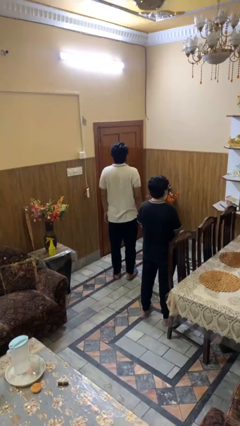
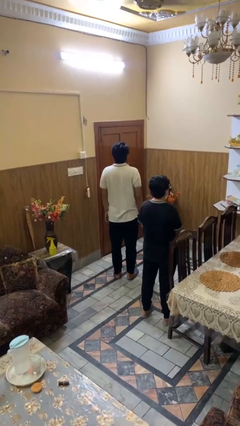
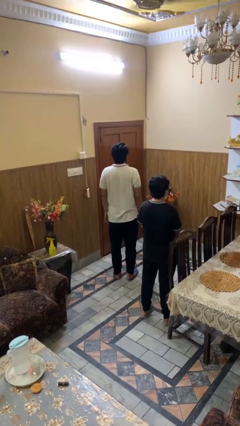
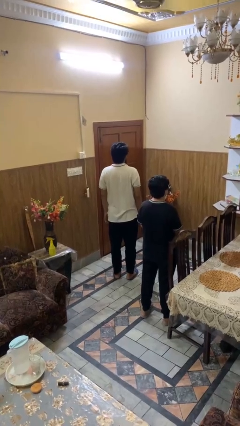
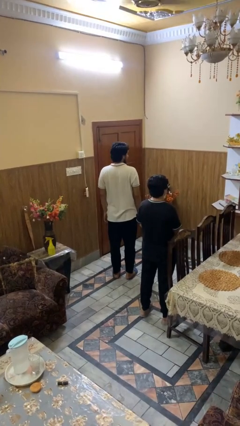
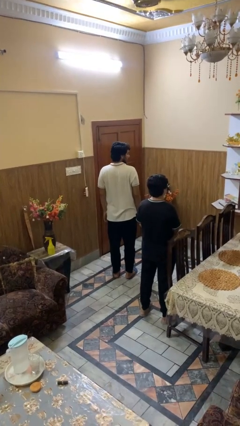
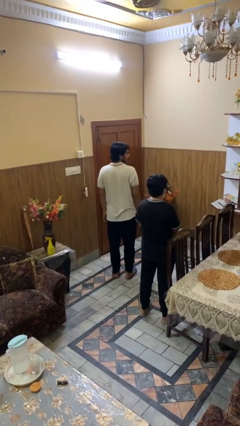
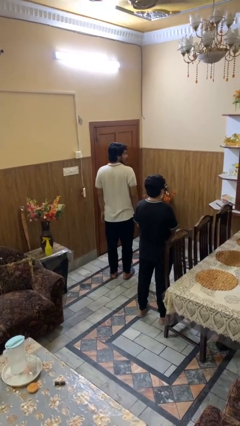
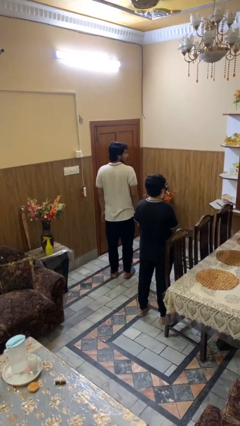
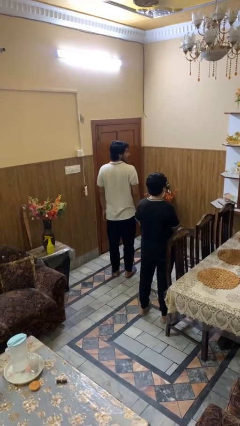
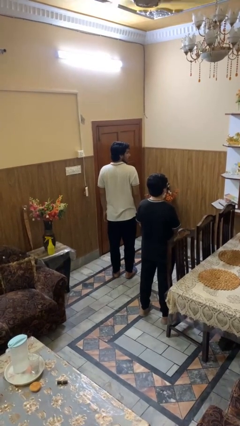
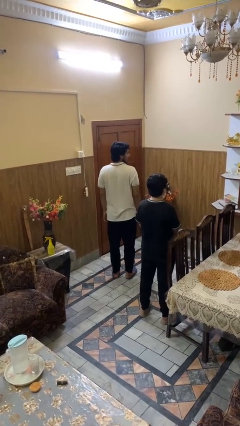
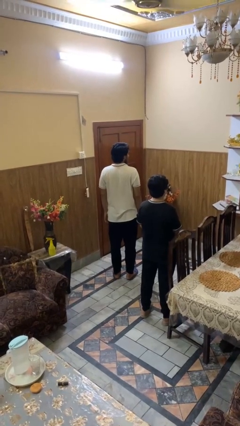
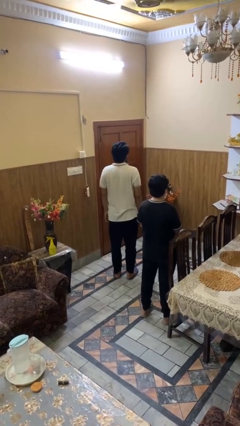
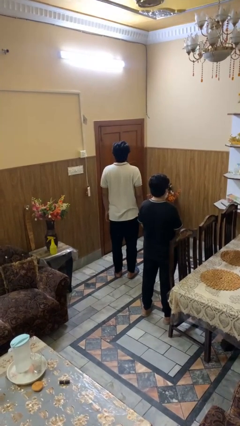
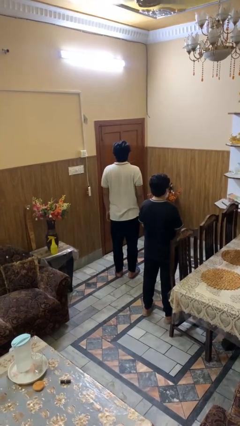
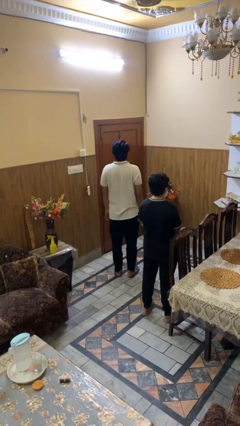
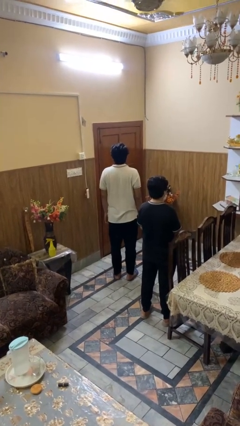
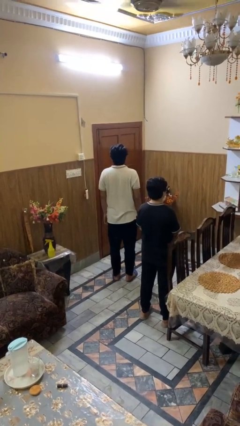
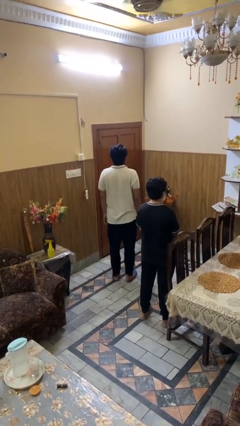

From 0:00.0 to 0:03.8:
person looks over shoulder

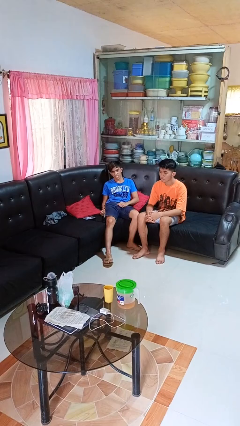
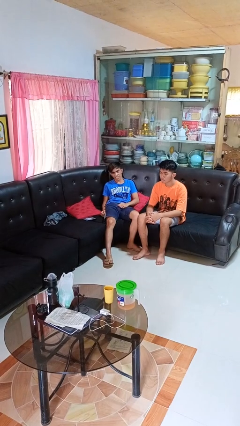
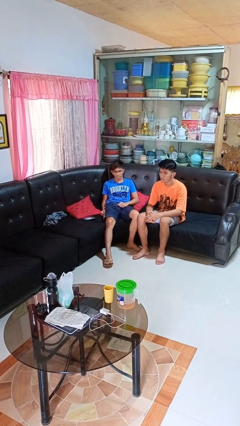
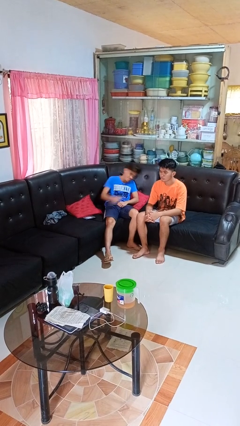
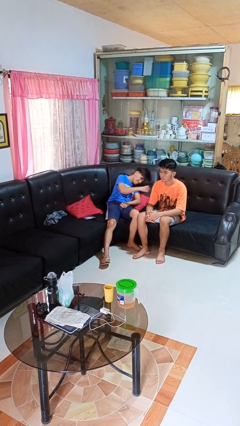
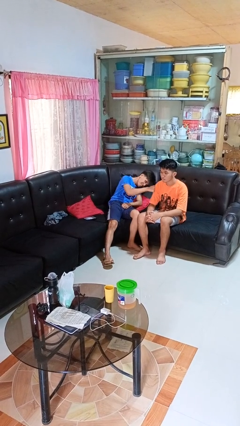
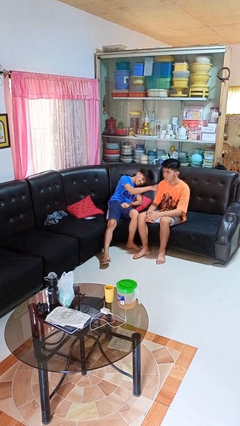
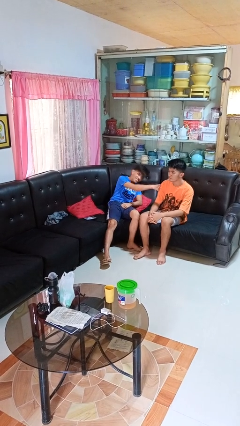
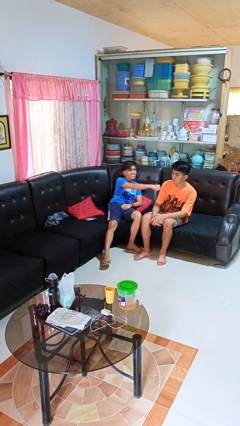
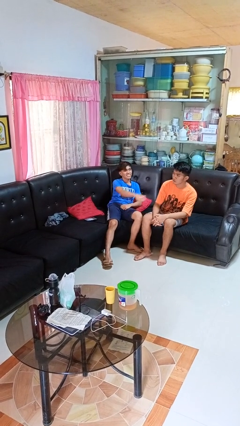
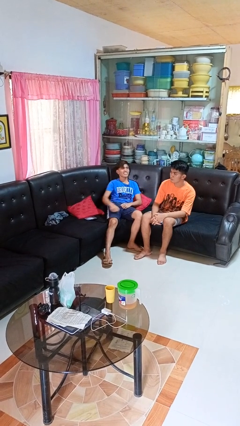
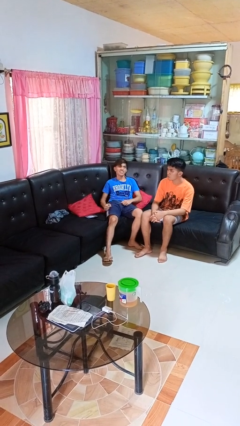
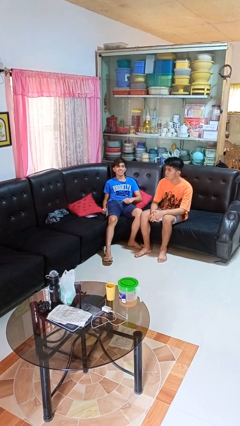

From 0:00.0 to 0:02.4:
person pounds shoulders of person

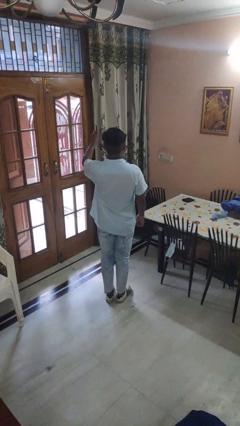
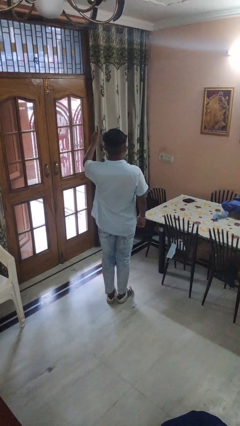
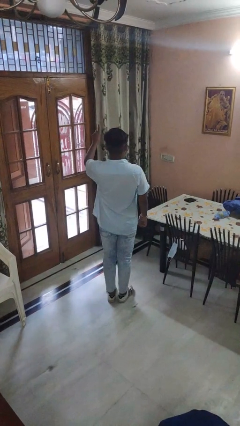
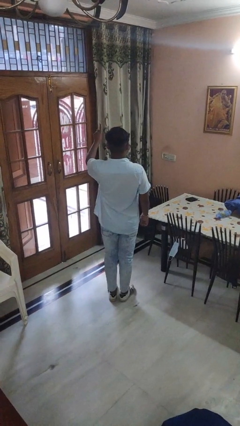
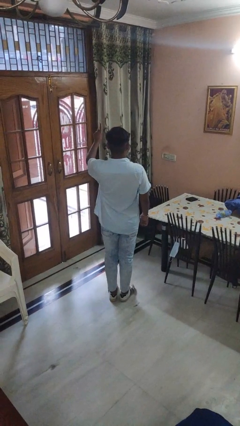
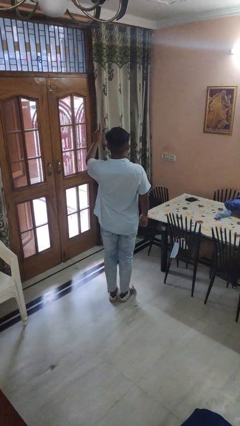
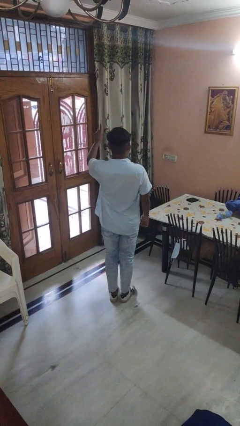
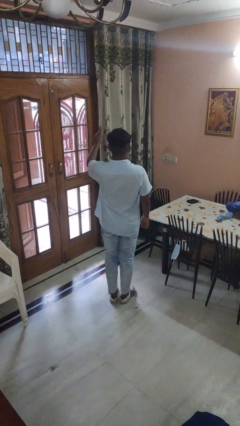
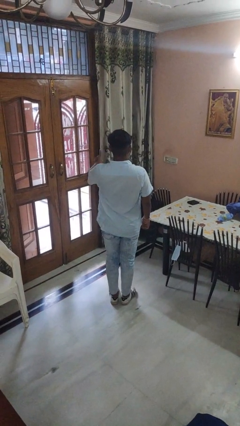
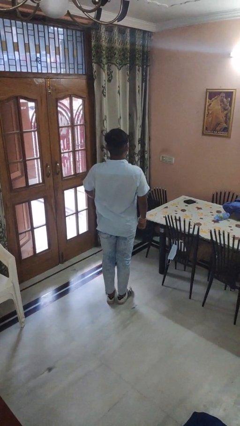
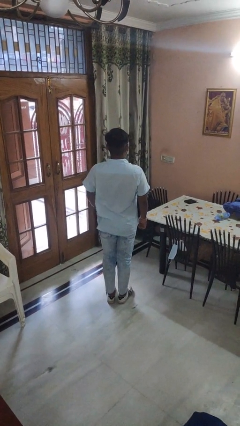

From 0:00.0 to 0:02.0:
person gestures number one

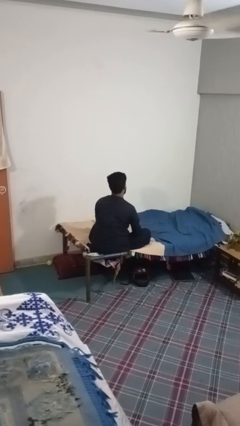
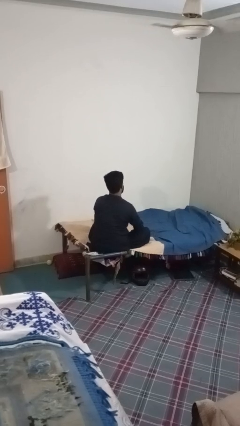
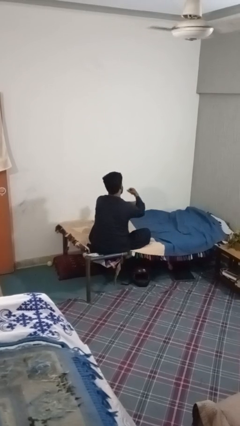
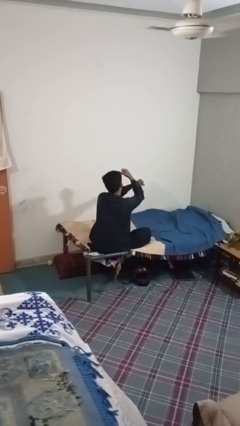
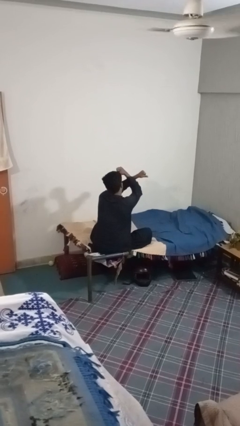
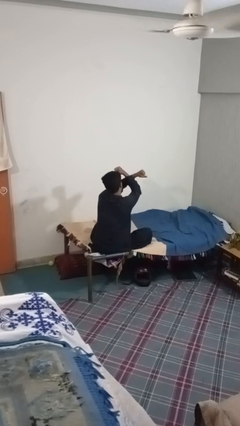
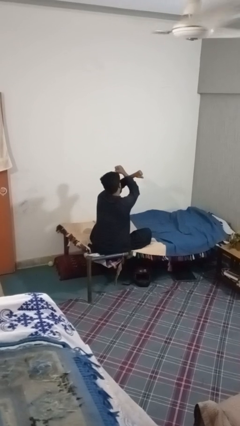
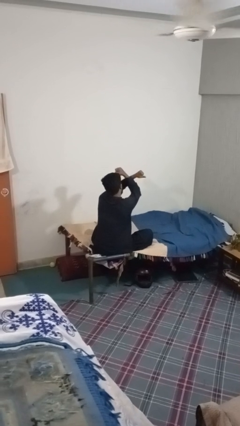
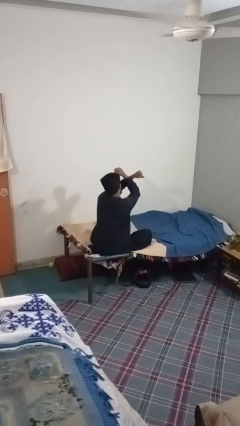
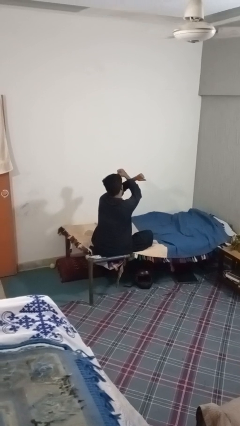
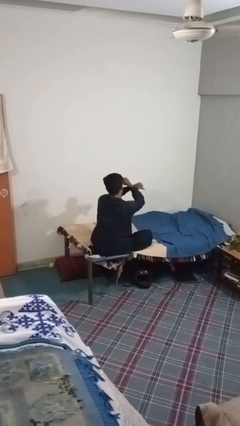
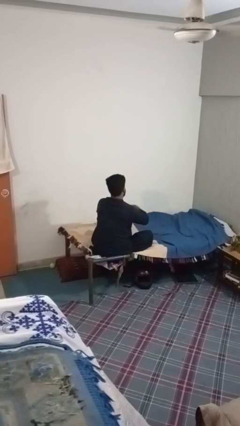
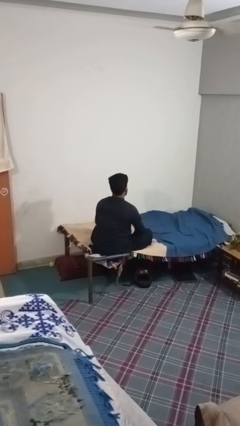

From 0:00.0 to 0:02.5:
person gestures arms x

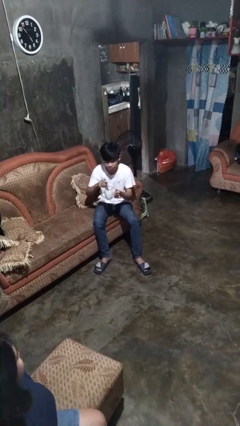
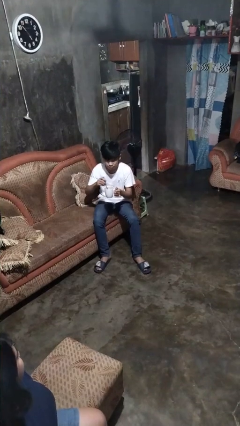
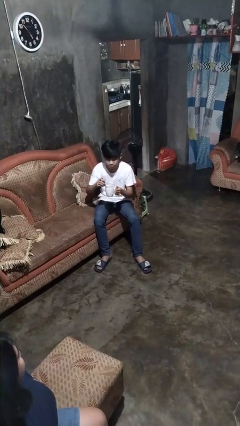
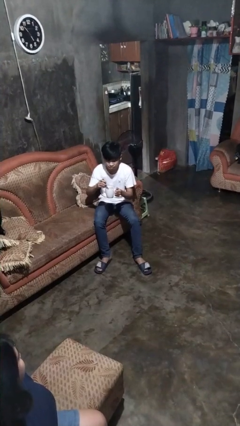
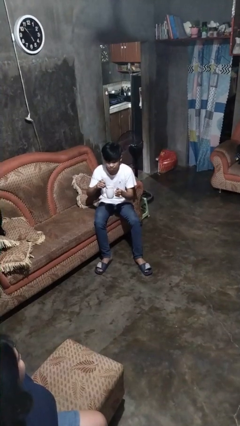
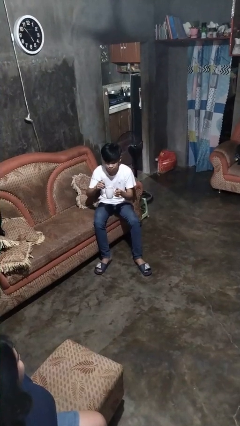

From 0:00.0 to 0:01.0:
person stirs mug

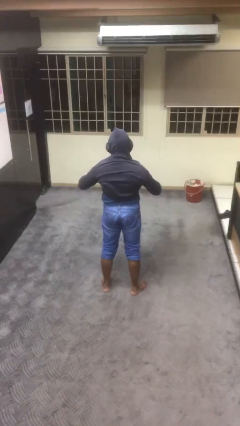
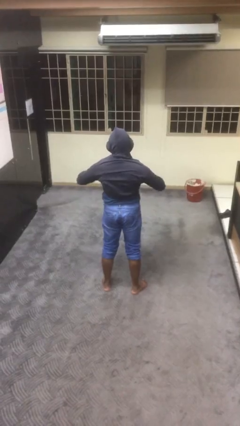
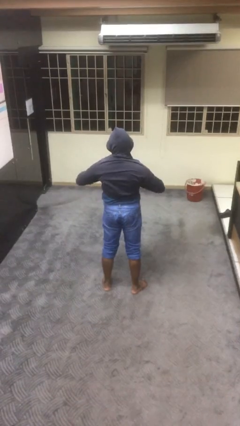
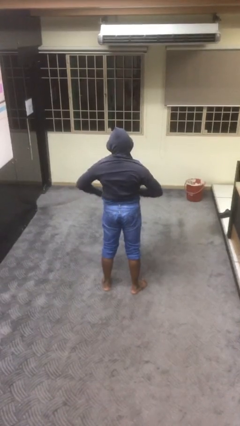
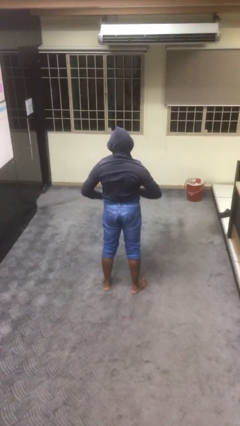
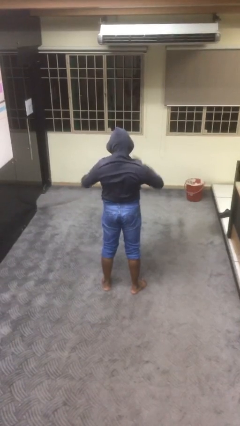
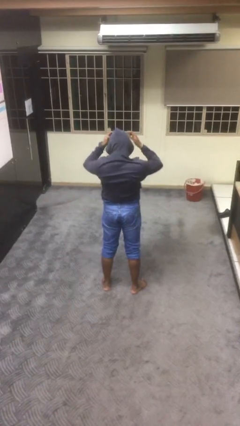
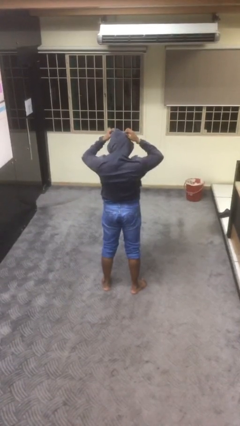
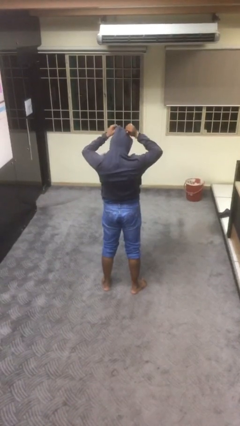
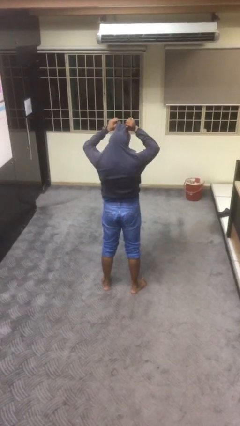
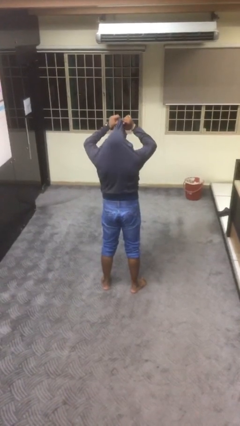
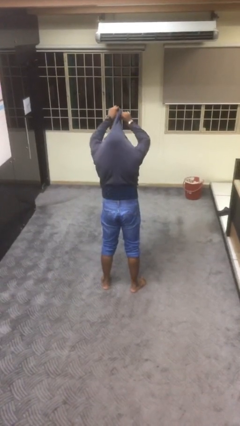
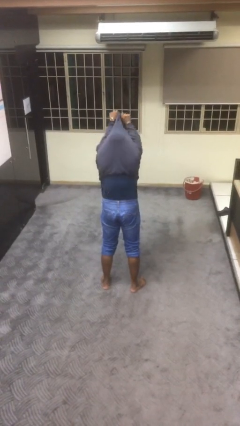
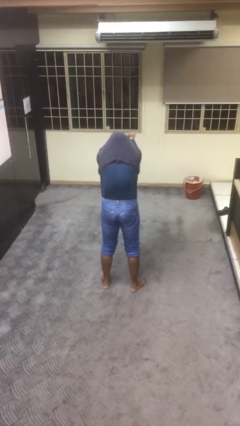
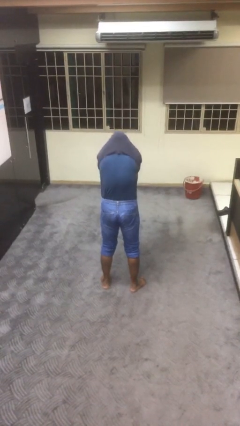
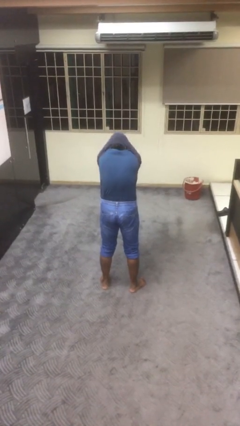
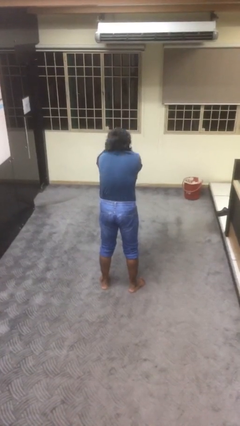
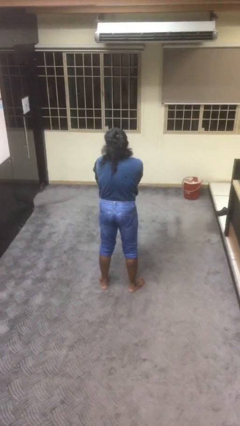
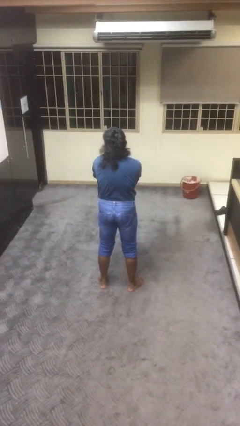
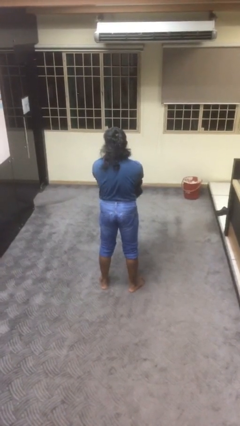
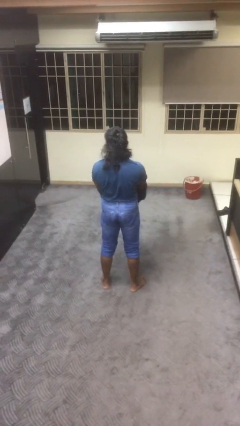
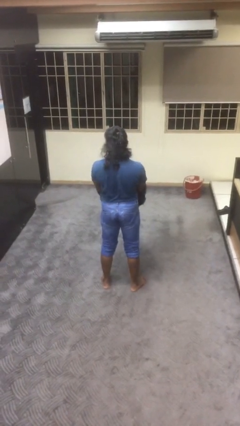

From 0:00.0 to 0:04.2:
person takes off hoodie

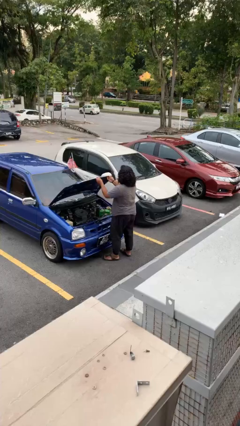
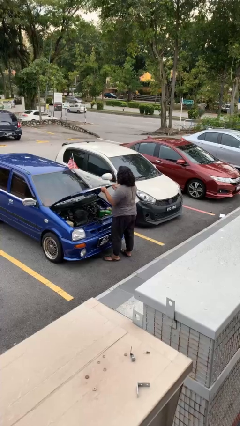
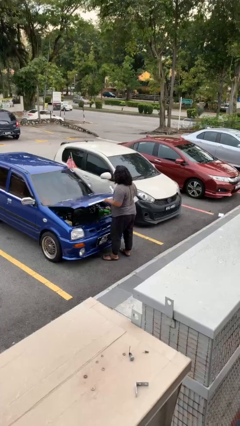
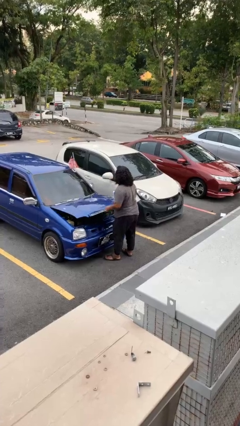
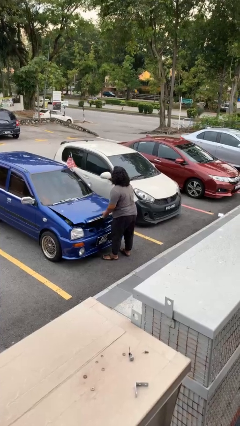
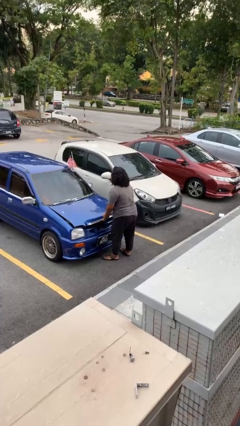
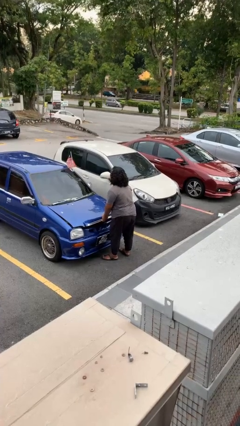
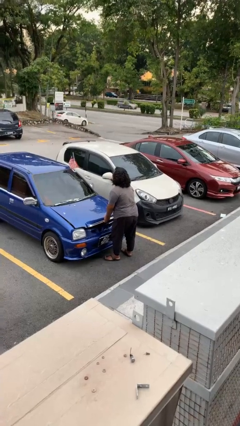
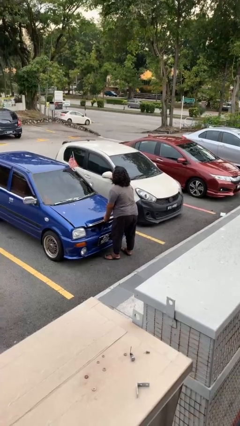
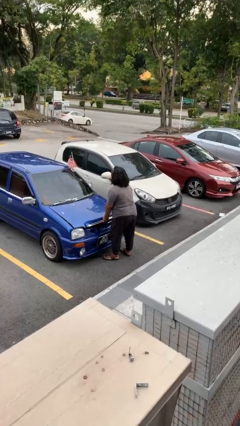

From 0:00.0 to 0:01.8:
person closes car hood
